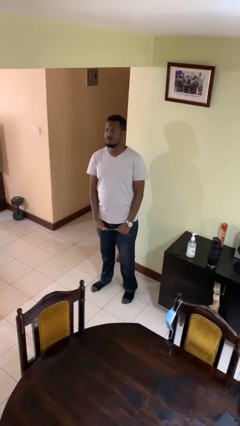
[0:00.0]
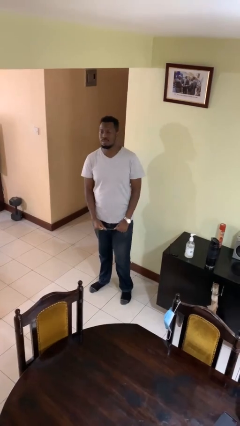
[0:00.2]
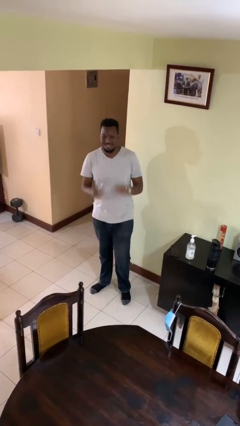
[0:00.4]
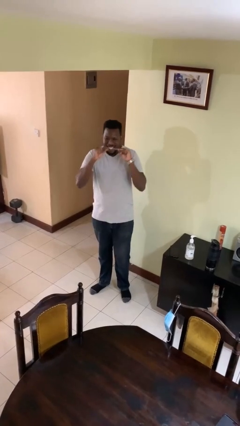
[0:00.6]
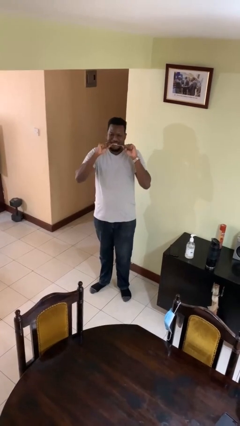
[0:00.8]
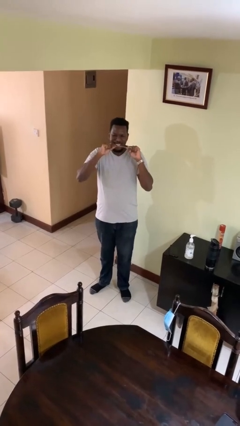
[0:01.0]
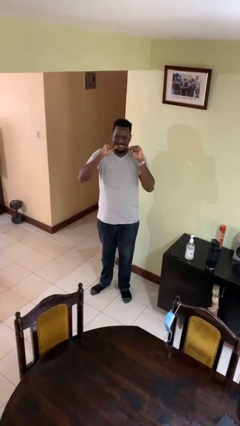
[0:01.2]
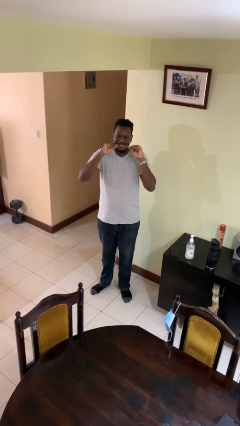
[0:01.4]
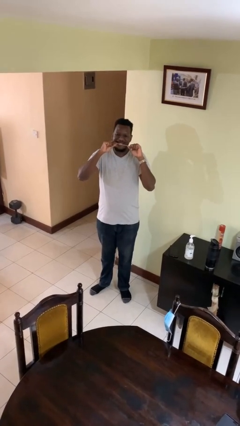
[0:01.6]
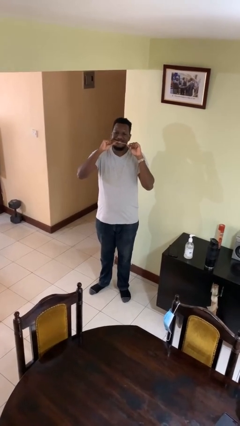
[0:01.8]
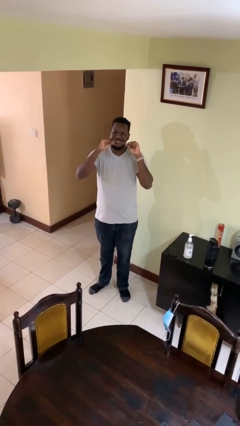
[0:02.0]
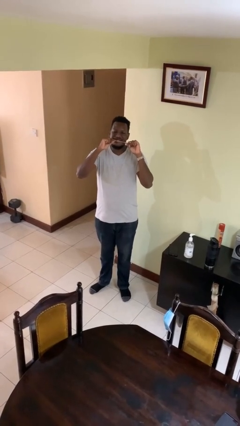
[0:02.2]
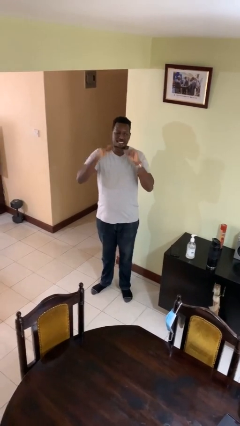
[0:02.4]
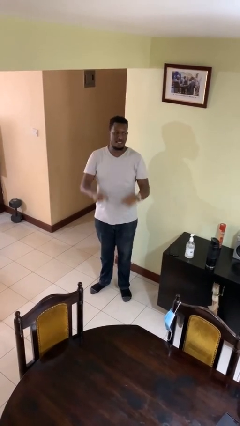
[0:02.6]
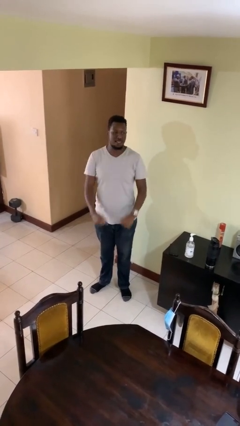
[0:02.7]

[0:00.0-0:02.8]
person flosses

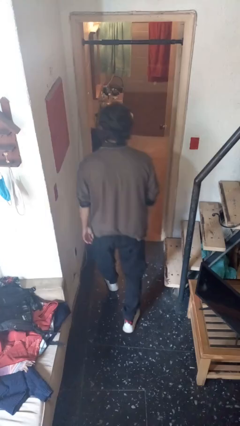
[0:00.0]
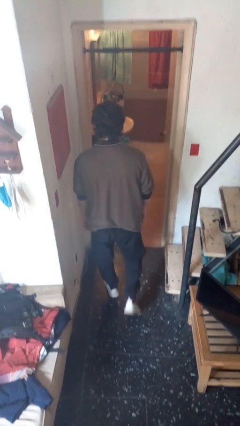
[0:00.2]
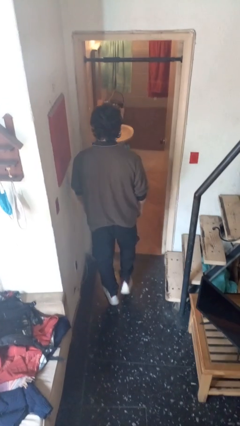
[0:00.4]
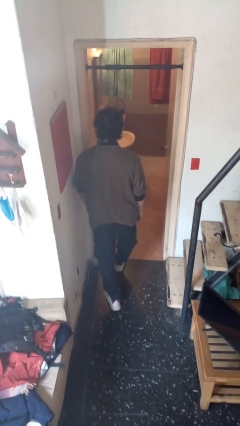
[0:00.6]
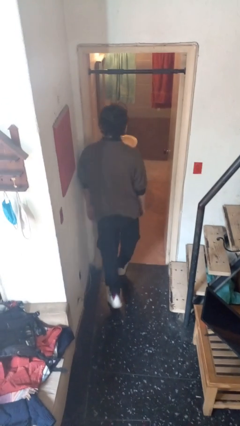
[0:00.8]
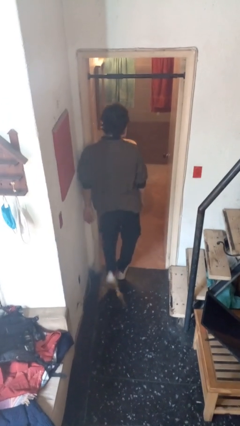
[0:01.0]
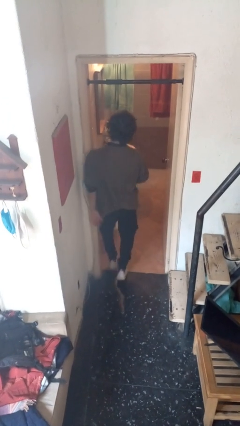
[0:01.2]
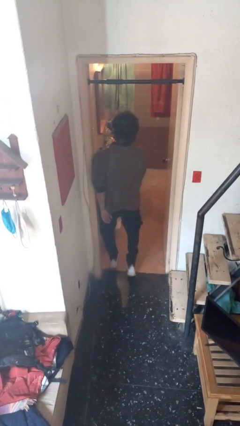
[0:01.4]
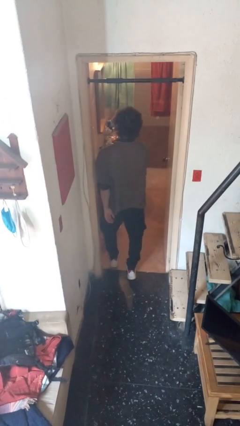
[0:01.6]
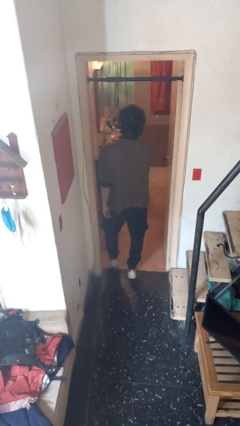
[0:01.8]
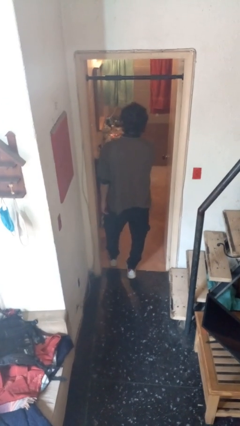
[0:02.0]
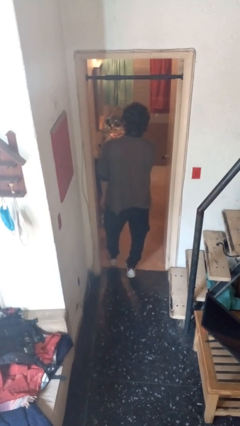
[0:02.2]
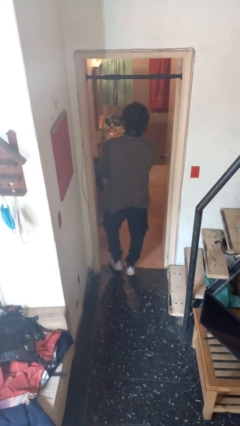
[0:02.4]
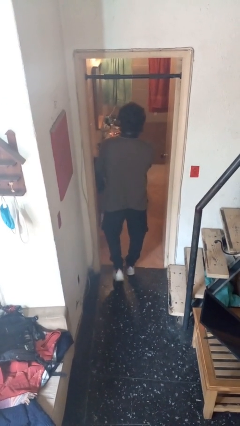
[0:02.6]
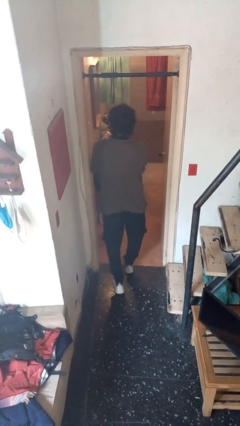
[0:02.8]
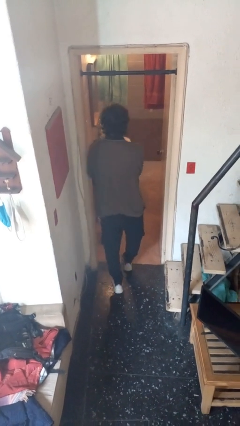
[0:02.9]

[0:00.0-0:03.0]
person bumps into wall

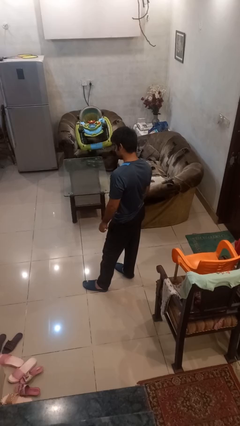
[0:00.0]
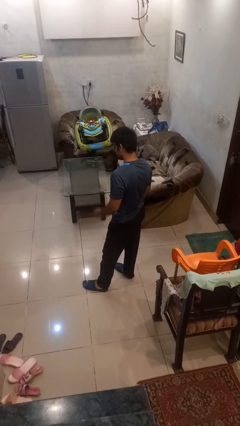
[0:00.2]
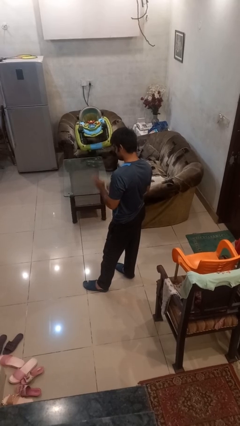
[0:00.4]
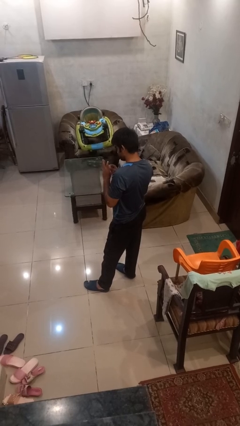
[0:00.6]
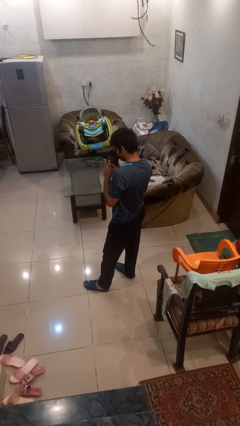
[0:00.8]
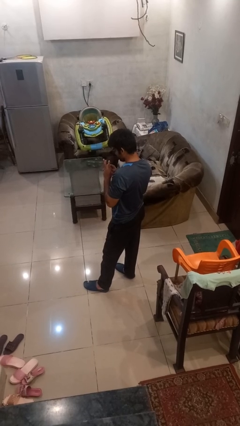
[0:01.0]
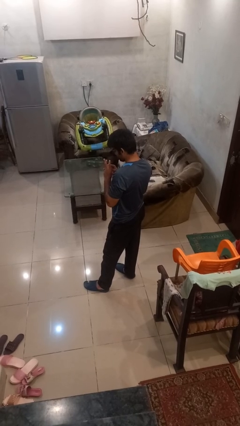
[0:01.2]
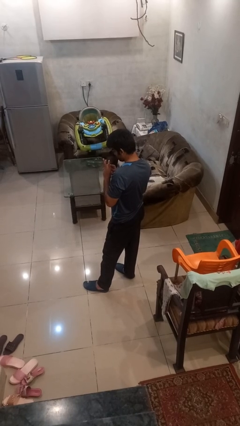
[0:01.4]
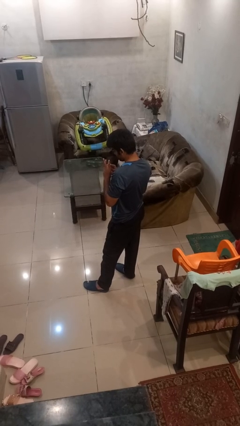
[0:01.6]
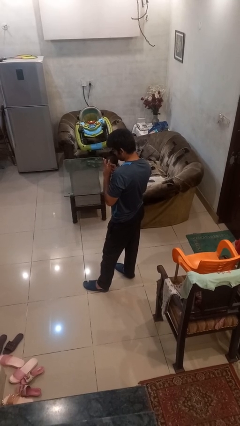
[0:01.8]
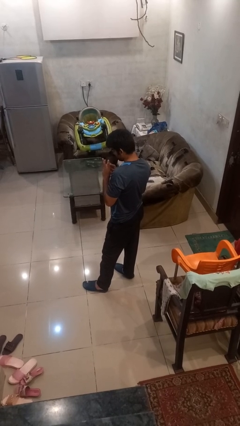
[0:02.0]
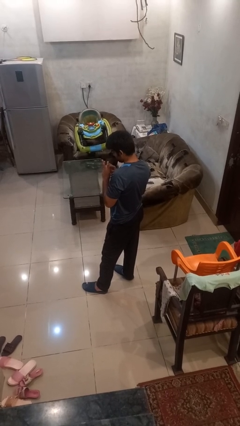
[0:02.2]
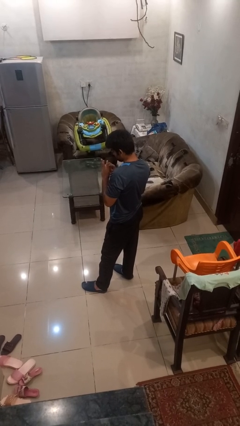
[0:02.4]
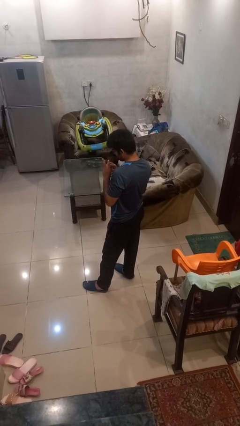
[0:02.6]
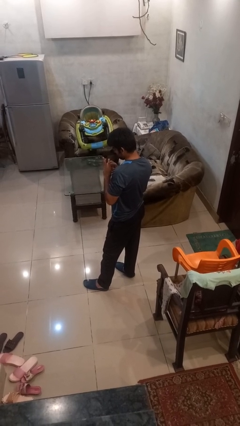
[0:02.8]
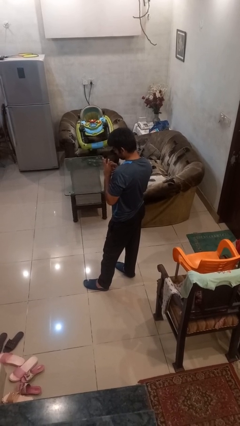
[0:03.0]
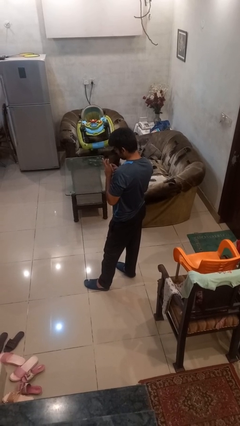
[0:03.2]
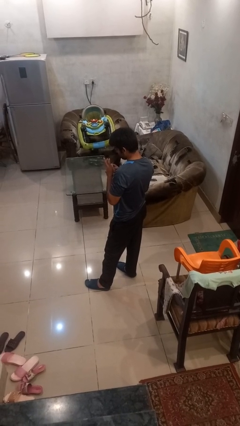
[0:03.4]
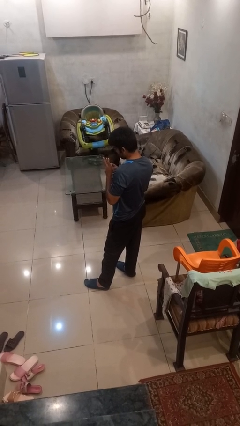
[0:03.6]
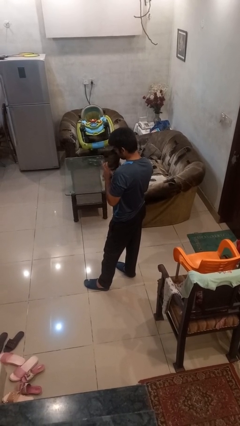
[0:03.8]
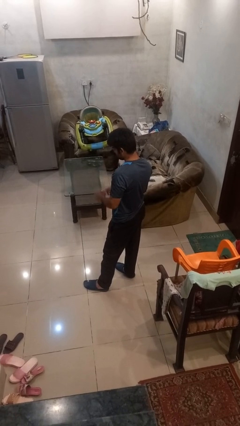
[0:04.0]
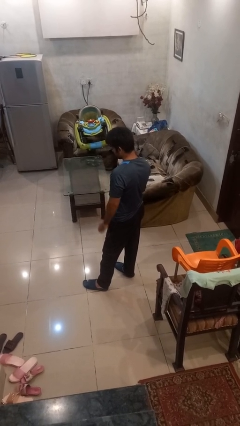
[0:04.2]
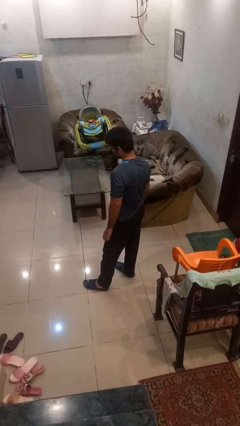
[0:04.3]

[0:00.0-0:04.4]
person files fingernails

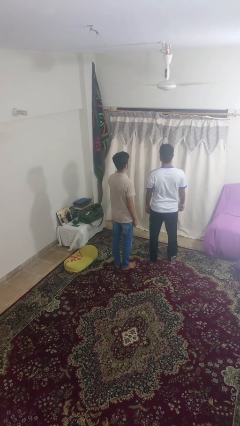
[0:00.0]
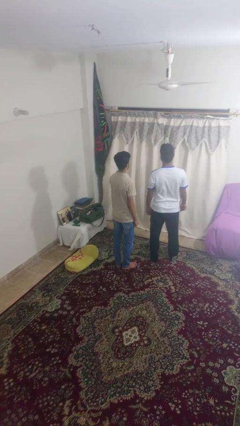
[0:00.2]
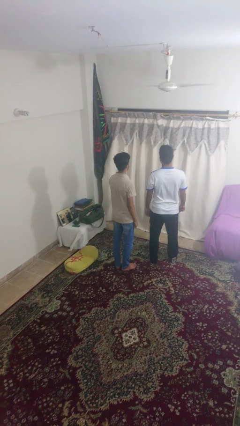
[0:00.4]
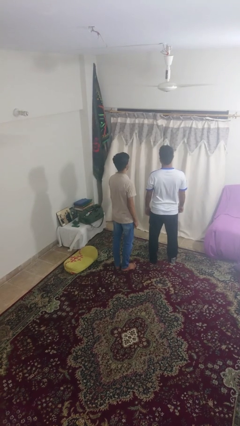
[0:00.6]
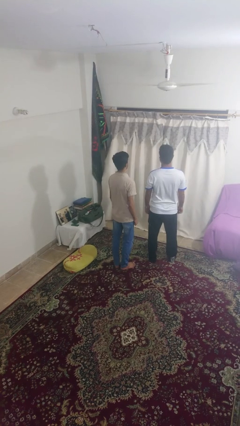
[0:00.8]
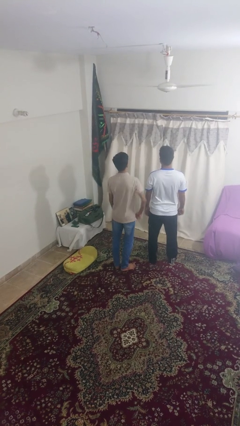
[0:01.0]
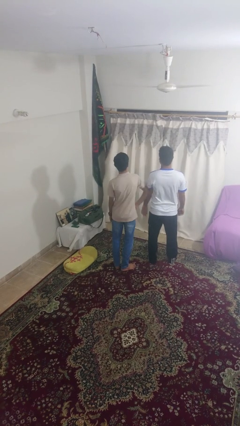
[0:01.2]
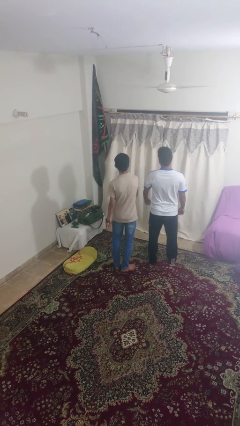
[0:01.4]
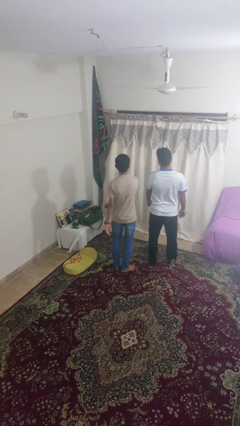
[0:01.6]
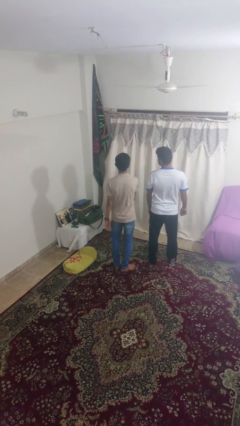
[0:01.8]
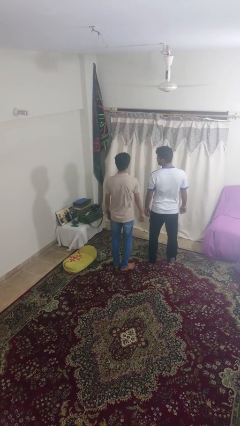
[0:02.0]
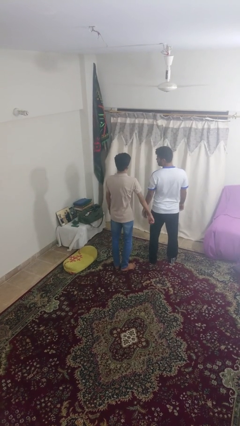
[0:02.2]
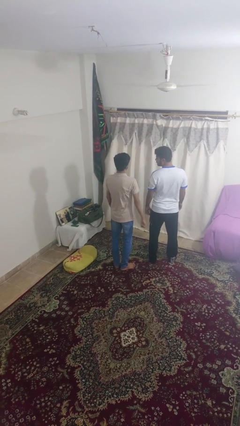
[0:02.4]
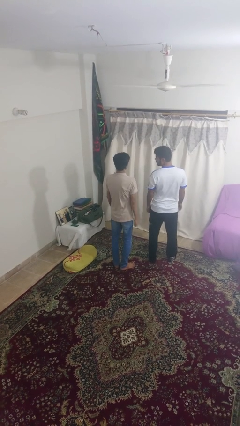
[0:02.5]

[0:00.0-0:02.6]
person nudges person with elbow

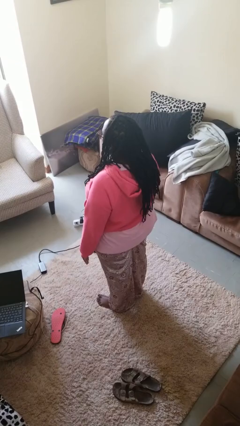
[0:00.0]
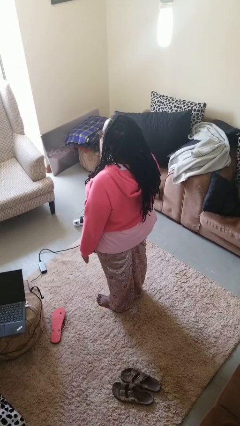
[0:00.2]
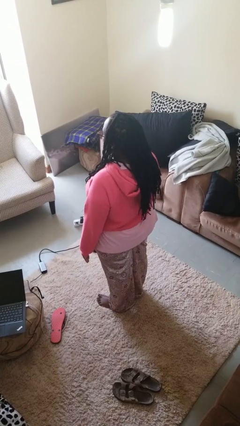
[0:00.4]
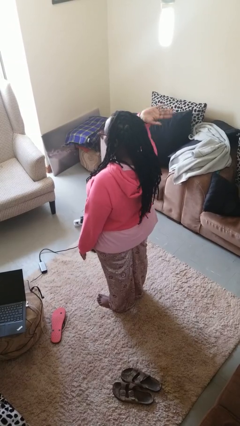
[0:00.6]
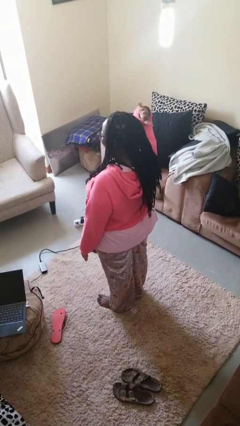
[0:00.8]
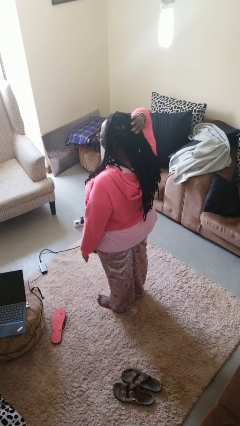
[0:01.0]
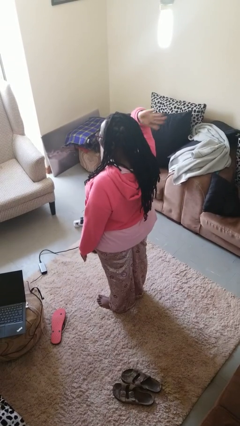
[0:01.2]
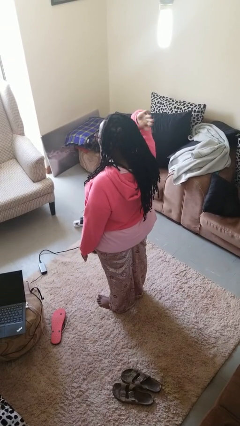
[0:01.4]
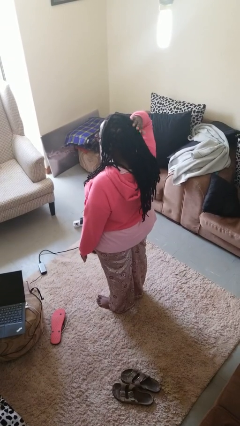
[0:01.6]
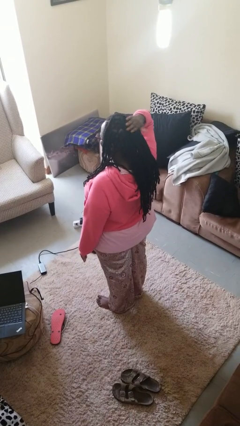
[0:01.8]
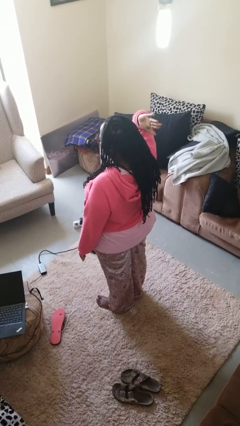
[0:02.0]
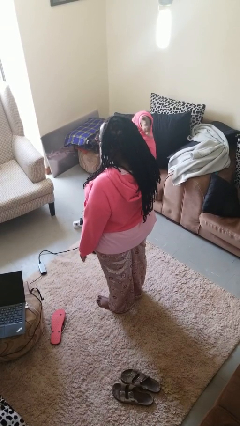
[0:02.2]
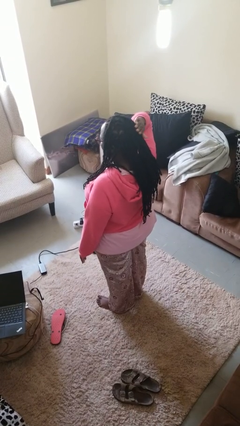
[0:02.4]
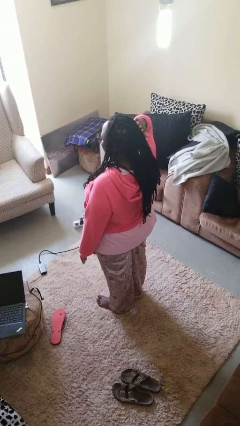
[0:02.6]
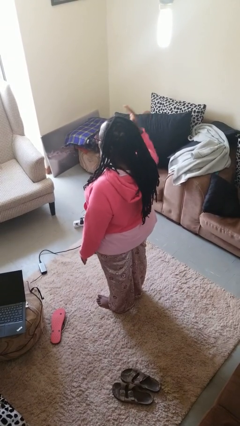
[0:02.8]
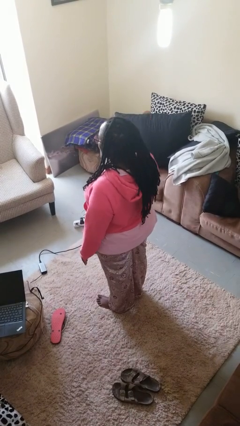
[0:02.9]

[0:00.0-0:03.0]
person pats head

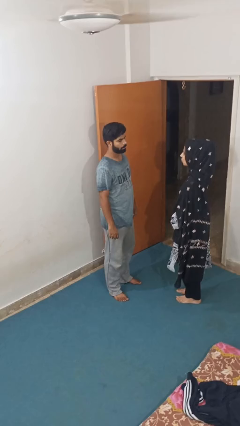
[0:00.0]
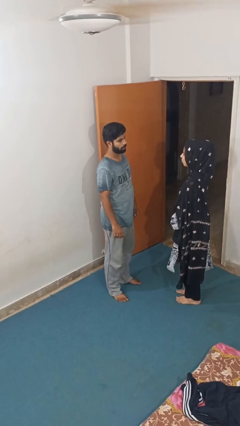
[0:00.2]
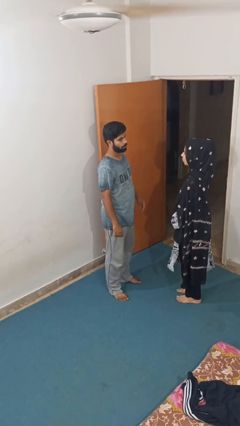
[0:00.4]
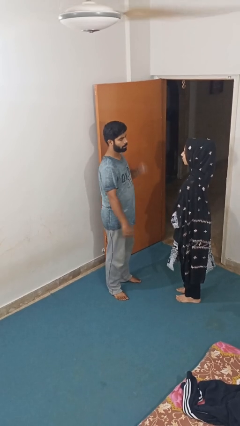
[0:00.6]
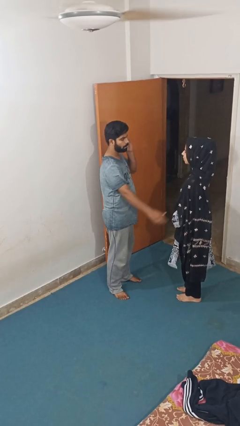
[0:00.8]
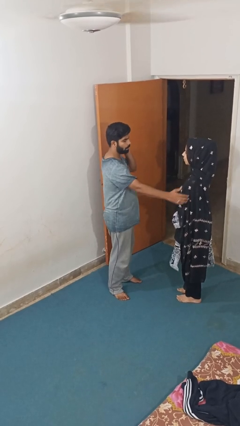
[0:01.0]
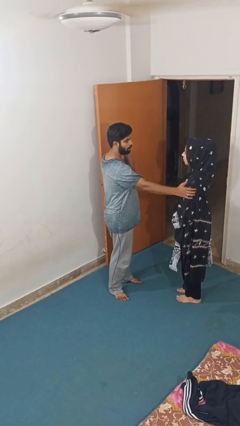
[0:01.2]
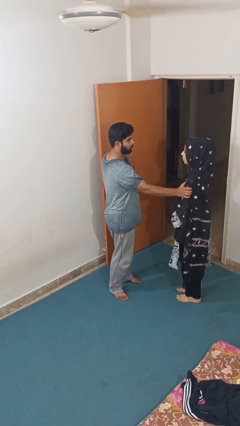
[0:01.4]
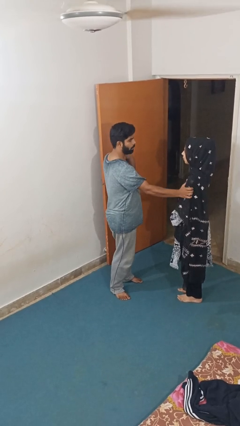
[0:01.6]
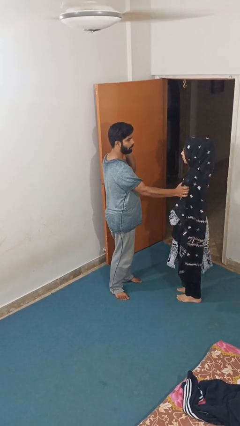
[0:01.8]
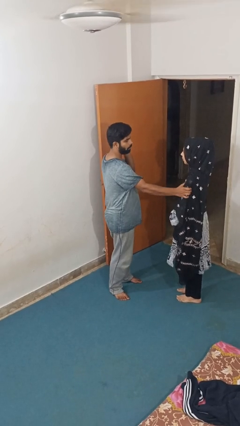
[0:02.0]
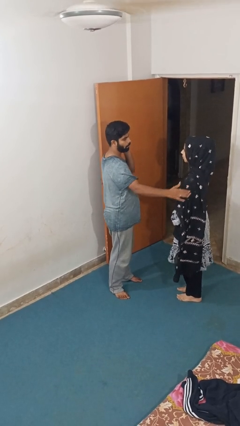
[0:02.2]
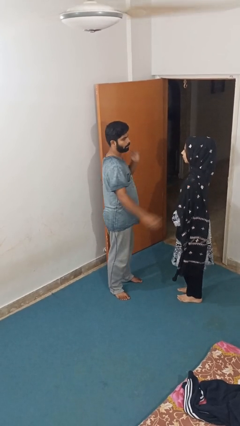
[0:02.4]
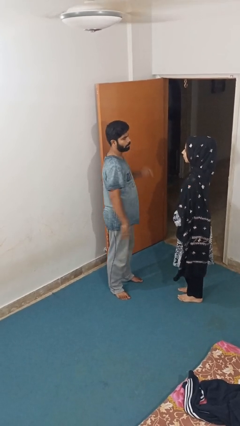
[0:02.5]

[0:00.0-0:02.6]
person grabs person by bicep
